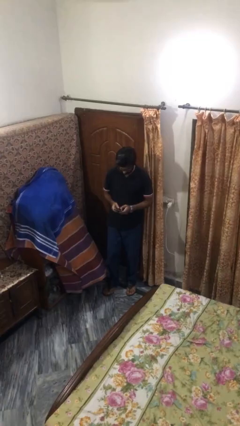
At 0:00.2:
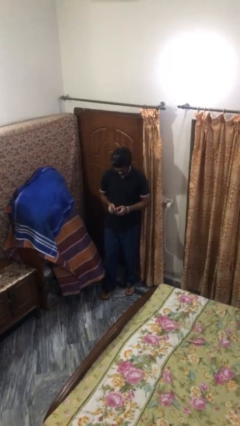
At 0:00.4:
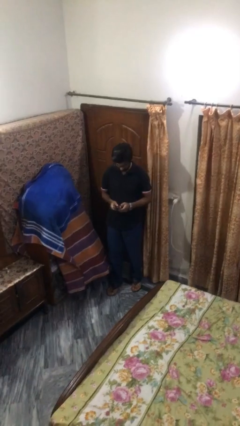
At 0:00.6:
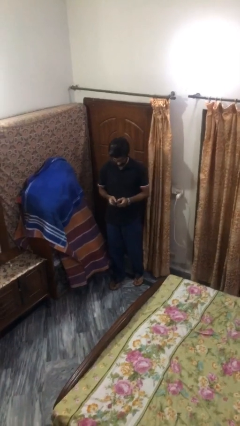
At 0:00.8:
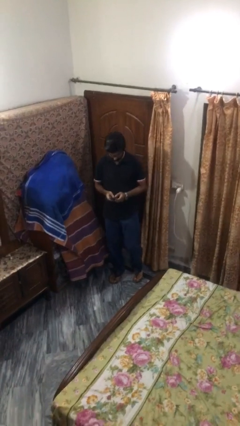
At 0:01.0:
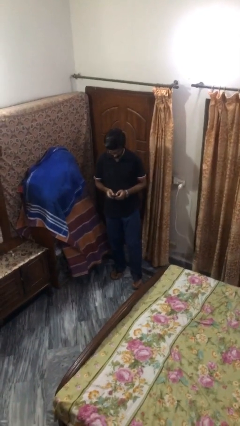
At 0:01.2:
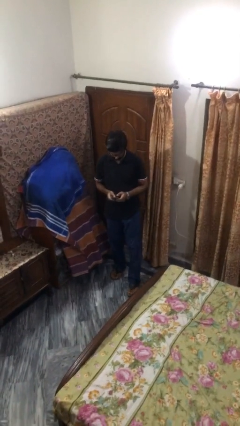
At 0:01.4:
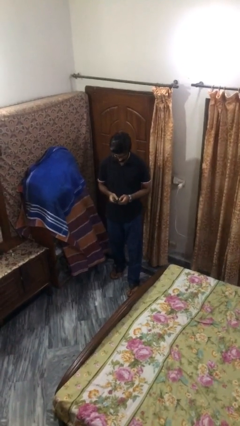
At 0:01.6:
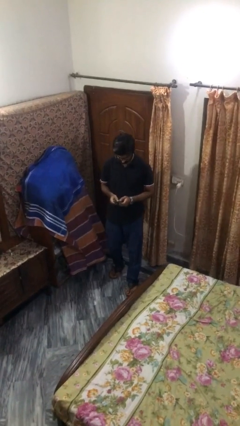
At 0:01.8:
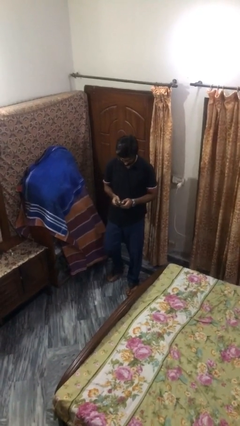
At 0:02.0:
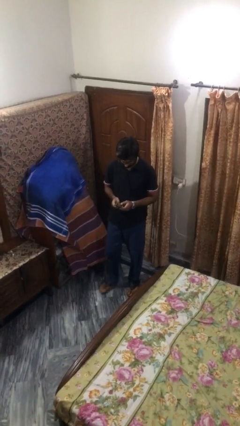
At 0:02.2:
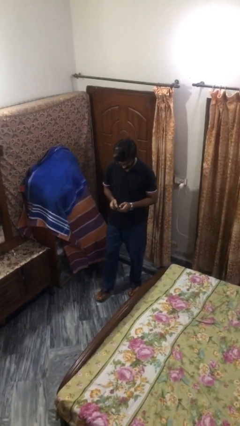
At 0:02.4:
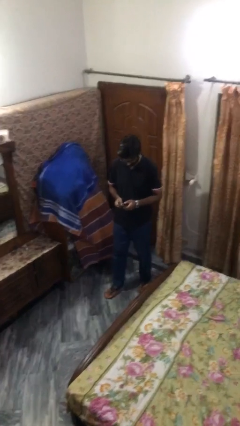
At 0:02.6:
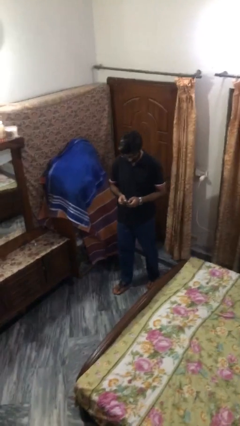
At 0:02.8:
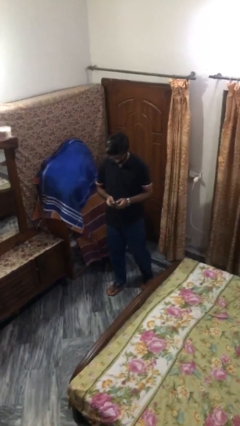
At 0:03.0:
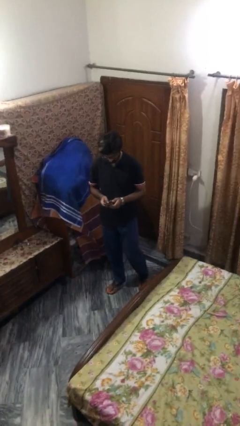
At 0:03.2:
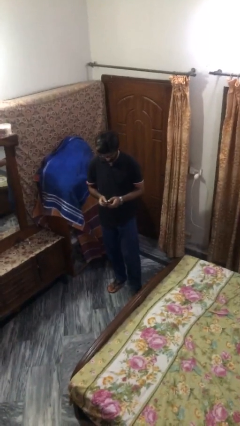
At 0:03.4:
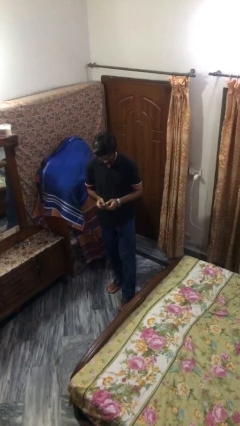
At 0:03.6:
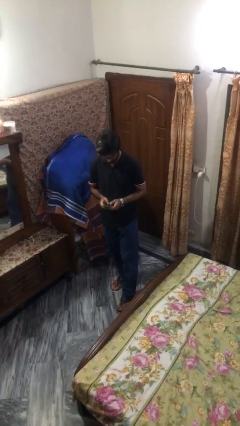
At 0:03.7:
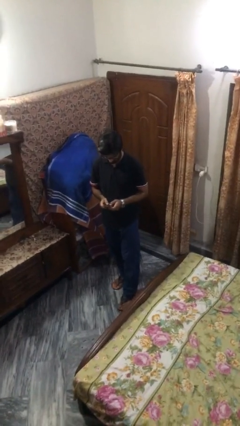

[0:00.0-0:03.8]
person texts on phone

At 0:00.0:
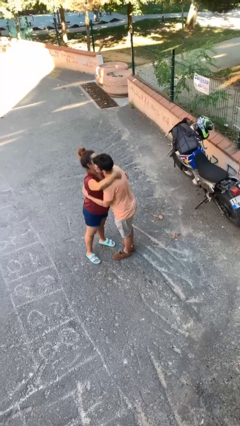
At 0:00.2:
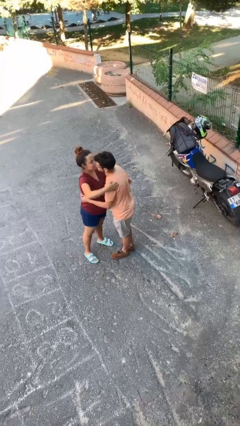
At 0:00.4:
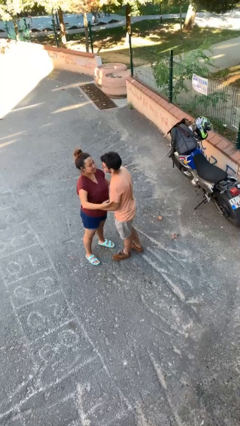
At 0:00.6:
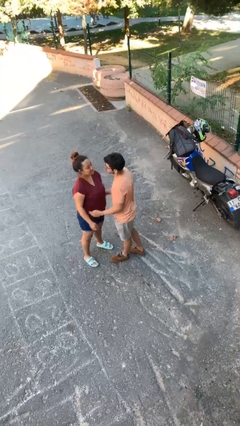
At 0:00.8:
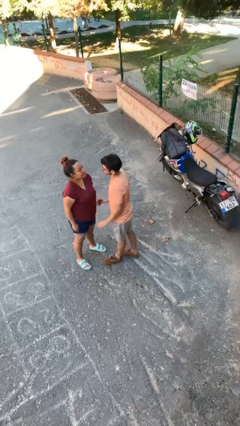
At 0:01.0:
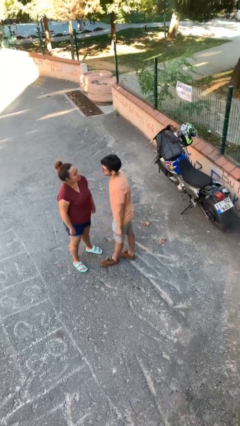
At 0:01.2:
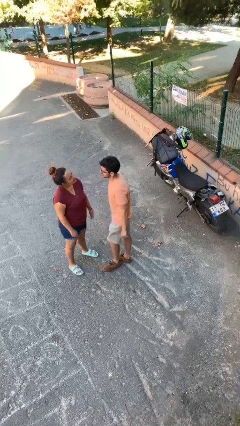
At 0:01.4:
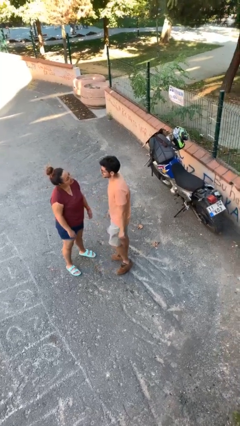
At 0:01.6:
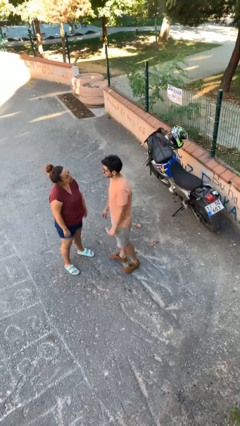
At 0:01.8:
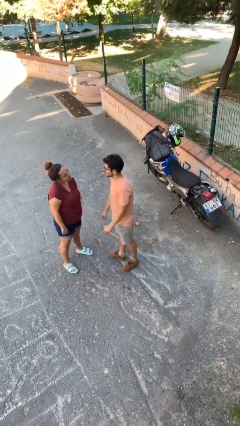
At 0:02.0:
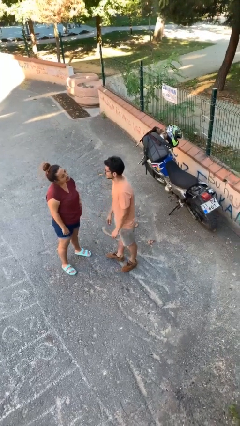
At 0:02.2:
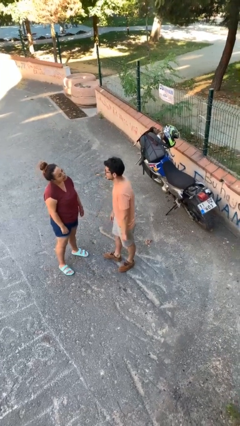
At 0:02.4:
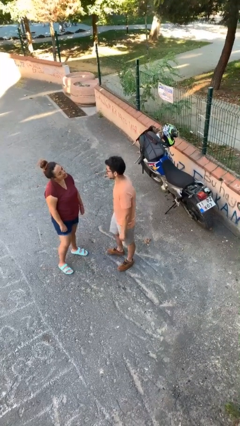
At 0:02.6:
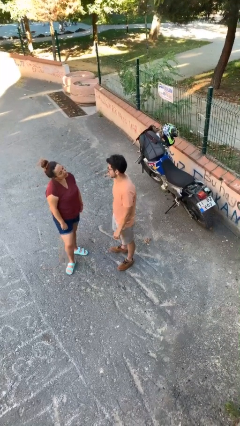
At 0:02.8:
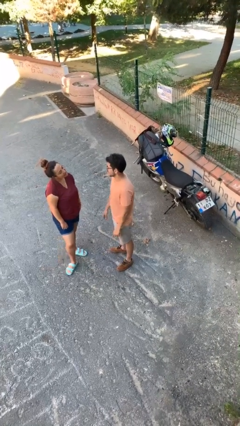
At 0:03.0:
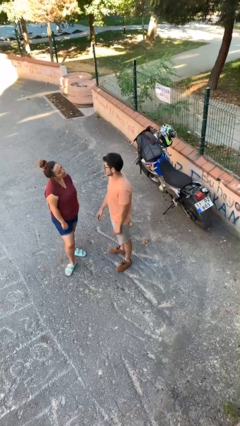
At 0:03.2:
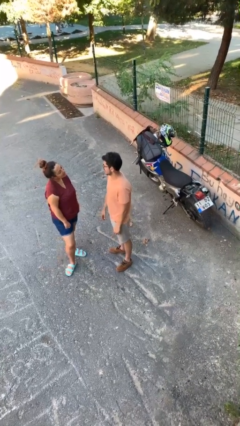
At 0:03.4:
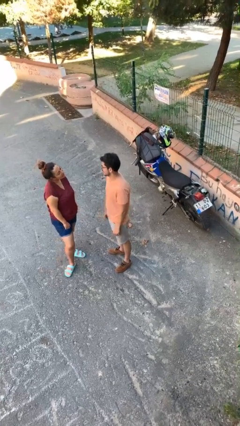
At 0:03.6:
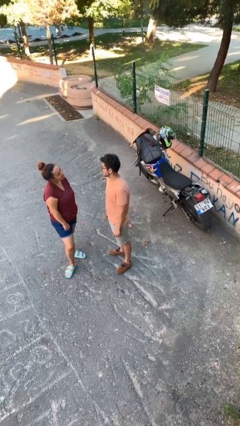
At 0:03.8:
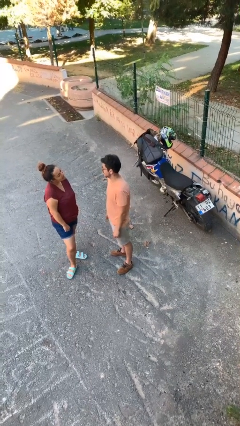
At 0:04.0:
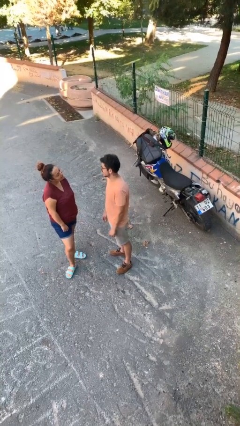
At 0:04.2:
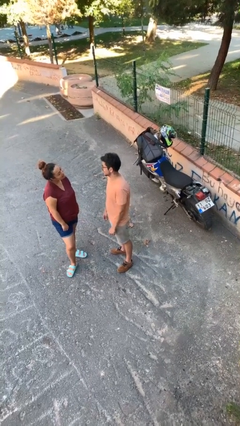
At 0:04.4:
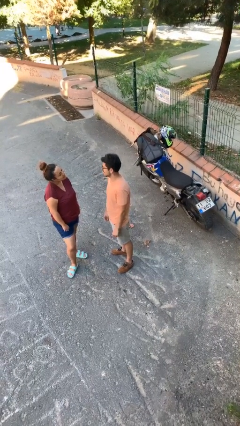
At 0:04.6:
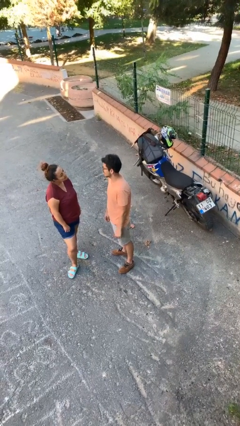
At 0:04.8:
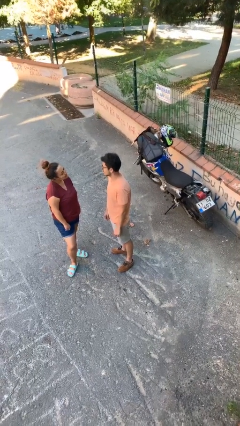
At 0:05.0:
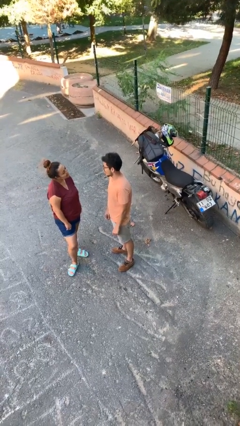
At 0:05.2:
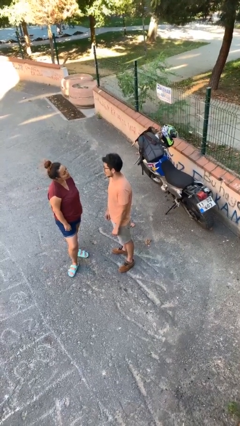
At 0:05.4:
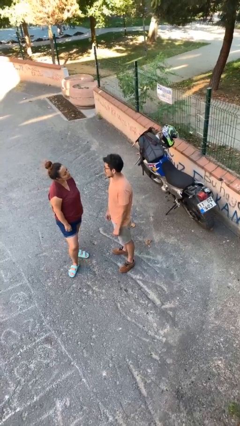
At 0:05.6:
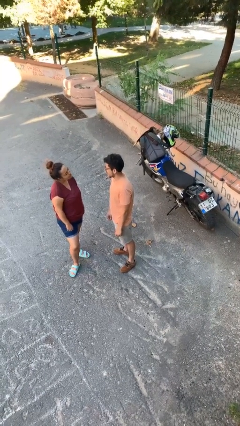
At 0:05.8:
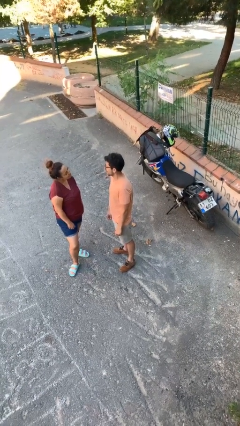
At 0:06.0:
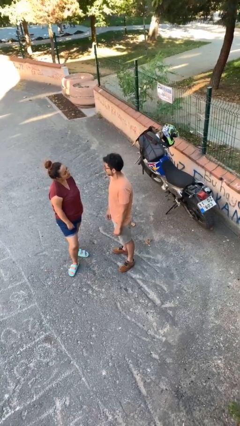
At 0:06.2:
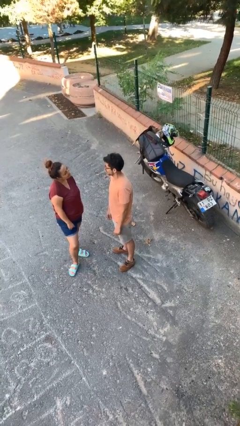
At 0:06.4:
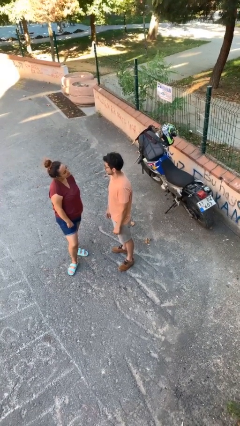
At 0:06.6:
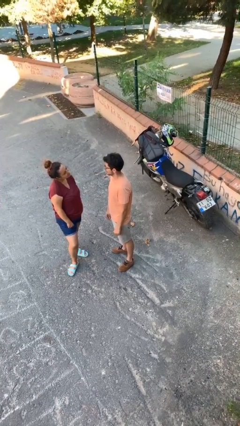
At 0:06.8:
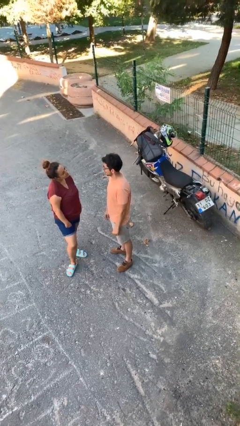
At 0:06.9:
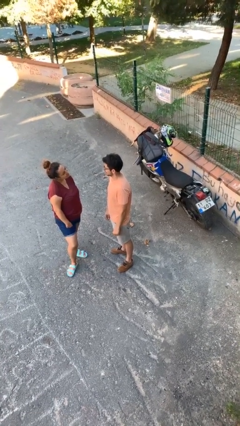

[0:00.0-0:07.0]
person talks to person

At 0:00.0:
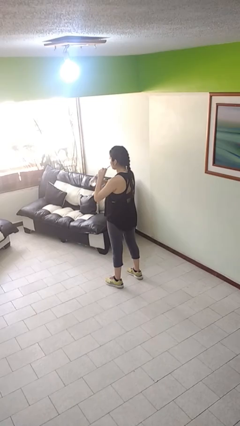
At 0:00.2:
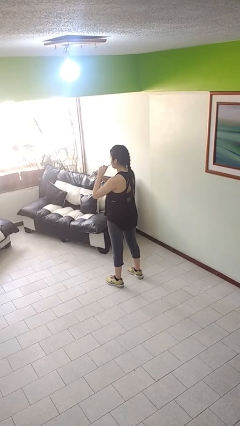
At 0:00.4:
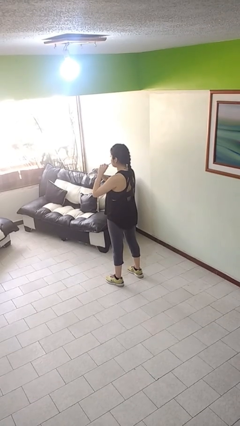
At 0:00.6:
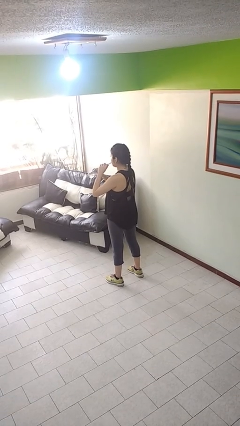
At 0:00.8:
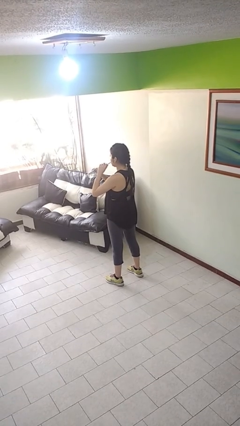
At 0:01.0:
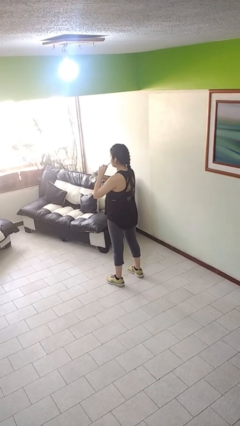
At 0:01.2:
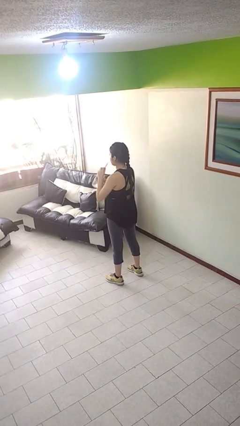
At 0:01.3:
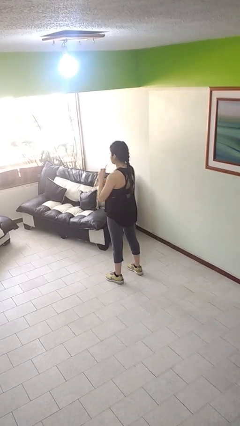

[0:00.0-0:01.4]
person drinks from straw

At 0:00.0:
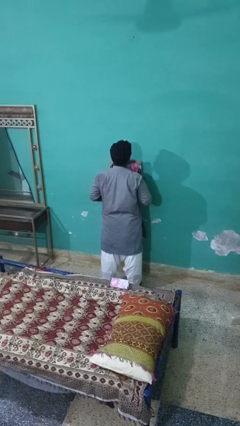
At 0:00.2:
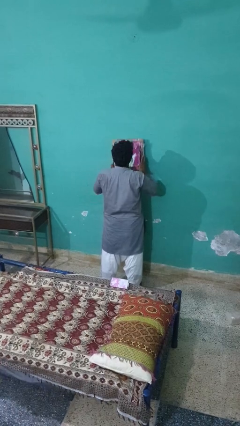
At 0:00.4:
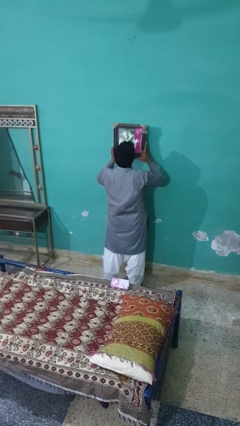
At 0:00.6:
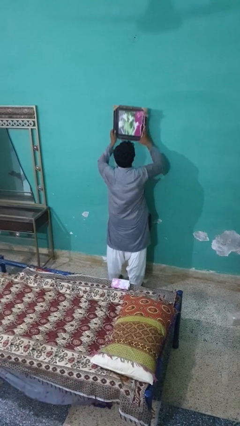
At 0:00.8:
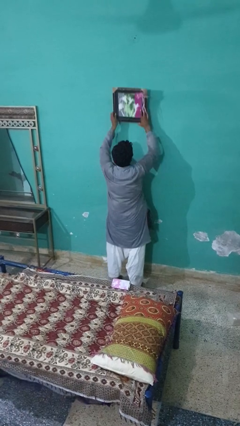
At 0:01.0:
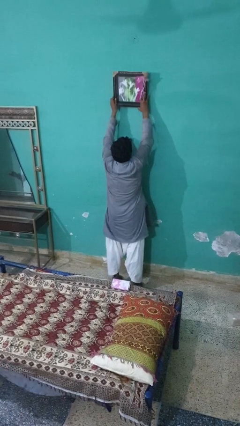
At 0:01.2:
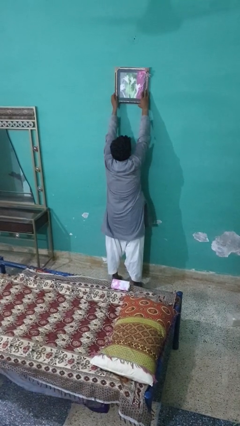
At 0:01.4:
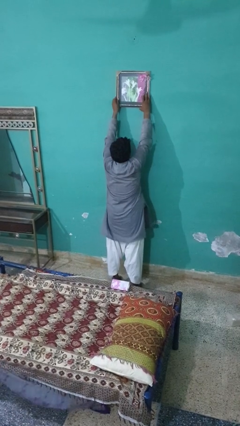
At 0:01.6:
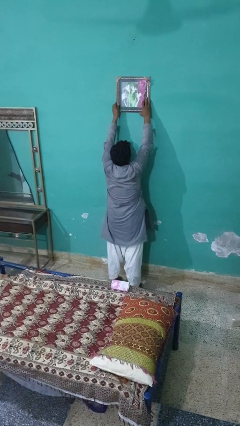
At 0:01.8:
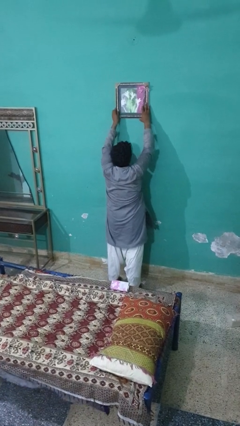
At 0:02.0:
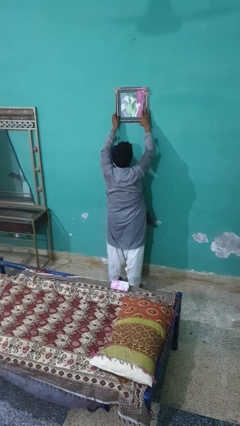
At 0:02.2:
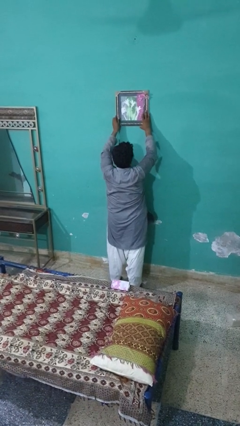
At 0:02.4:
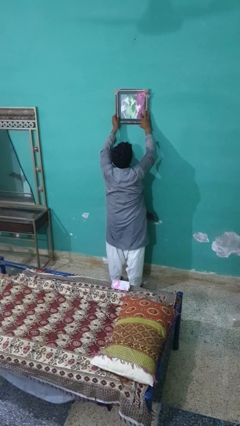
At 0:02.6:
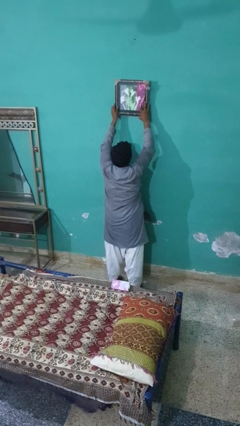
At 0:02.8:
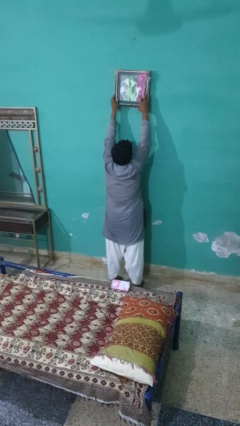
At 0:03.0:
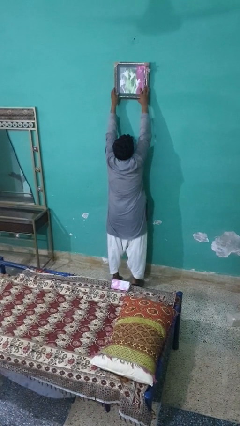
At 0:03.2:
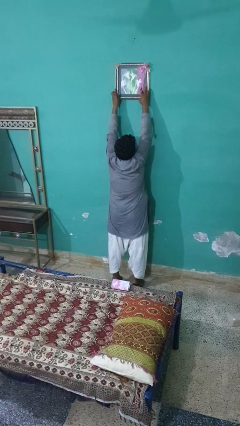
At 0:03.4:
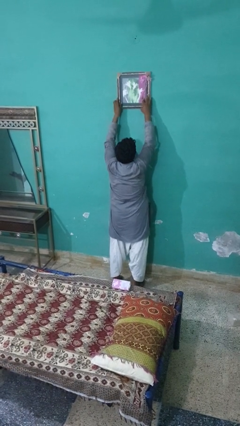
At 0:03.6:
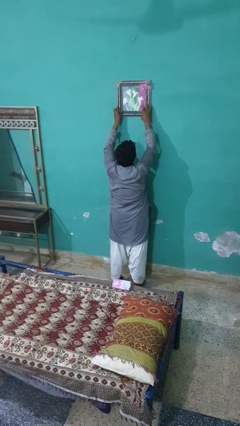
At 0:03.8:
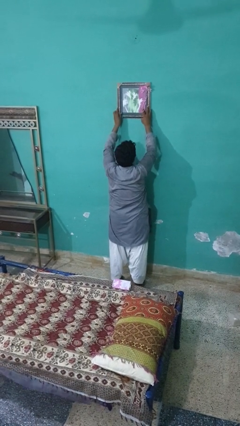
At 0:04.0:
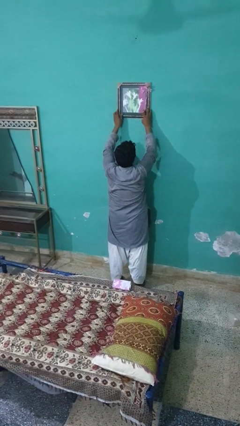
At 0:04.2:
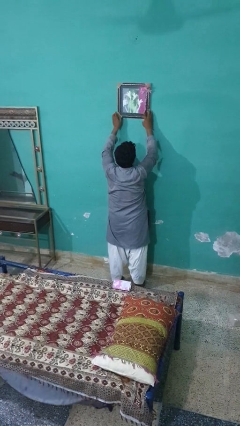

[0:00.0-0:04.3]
person puts up picture frame

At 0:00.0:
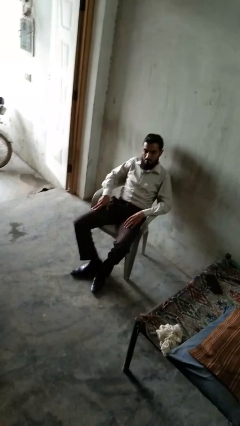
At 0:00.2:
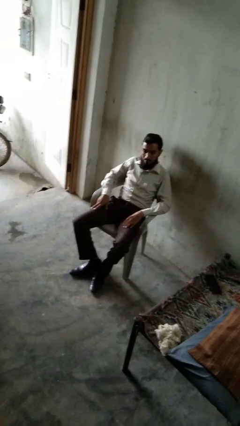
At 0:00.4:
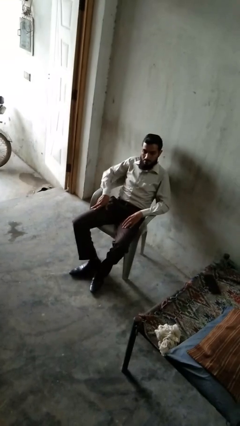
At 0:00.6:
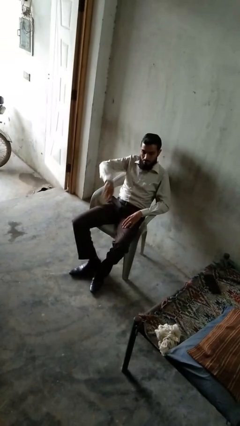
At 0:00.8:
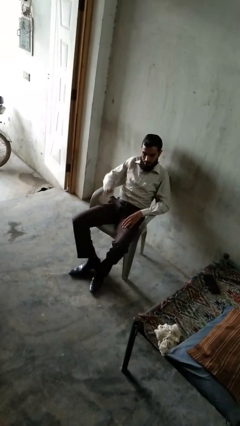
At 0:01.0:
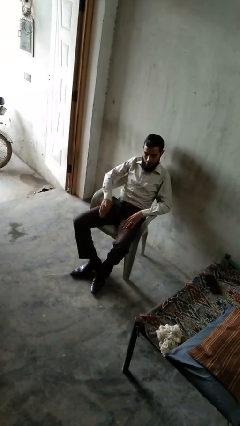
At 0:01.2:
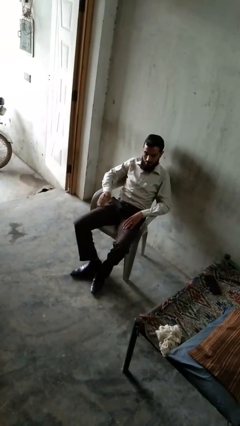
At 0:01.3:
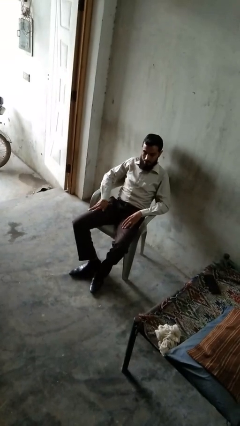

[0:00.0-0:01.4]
person slaps hands on thighs
